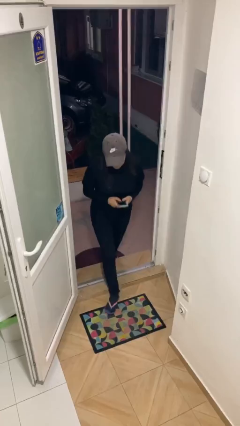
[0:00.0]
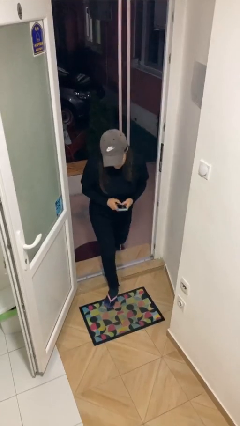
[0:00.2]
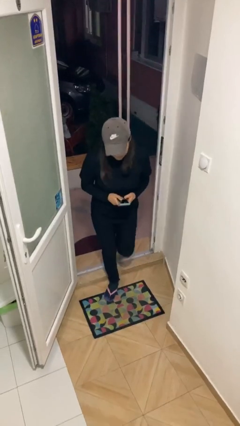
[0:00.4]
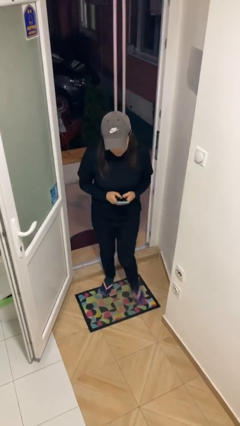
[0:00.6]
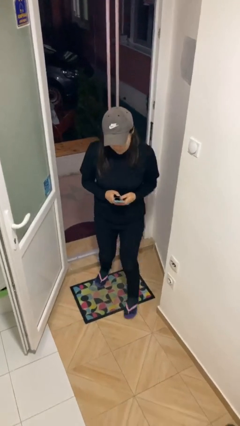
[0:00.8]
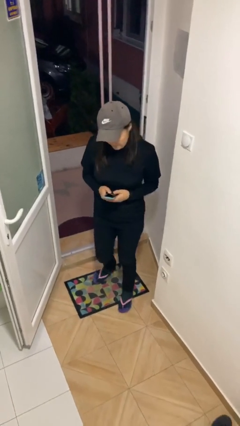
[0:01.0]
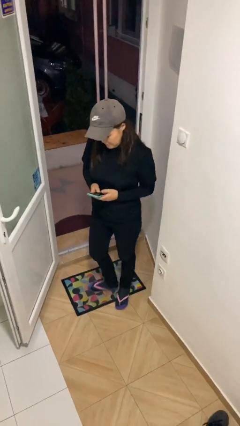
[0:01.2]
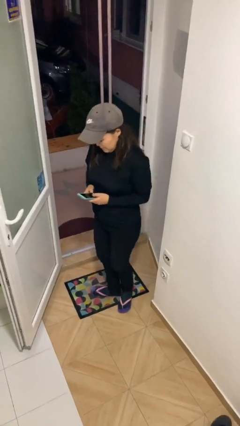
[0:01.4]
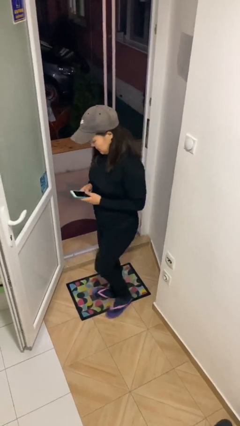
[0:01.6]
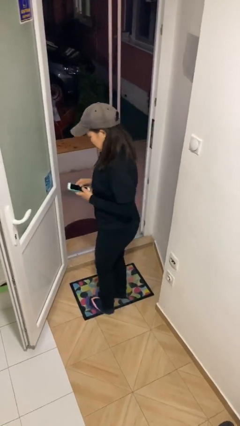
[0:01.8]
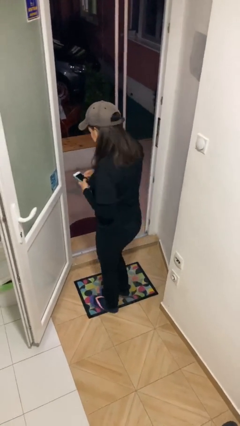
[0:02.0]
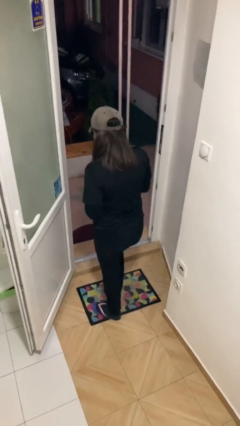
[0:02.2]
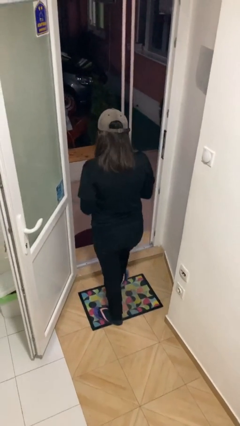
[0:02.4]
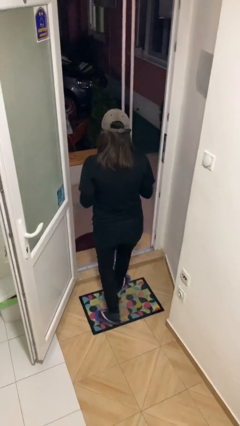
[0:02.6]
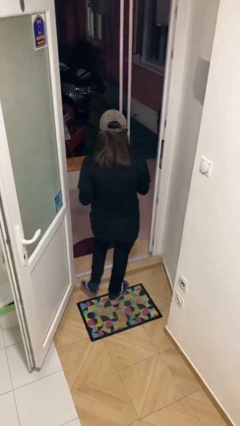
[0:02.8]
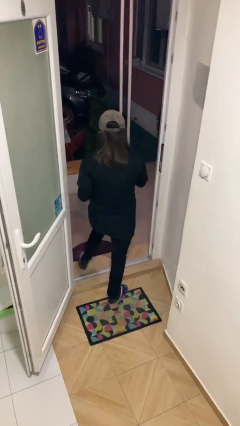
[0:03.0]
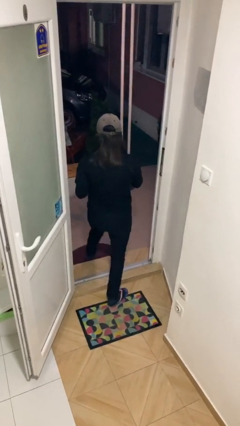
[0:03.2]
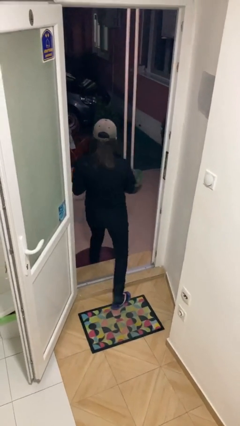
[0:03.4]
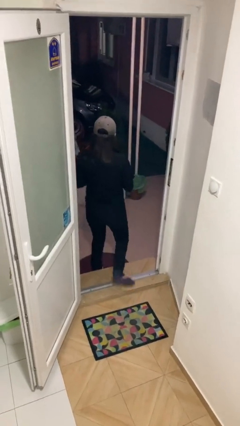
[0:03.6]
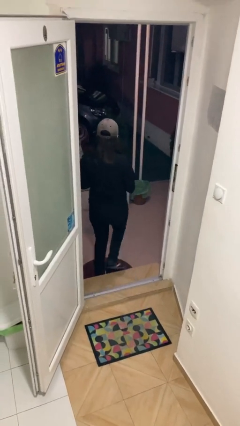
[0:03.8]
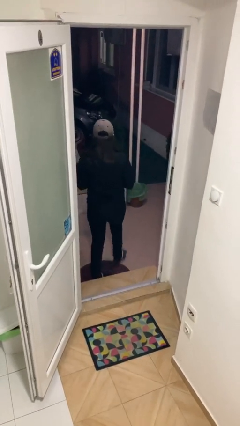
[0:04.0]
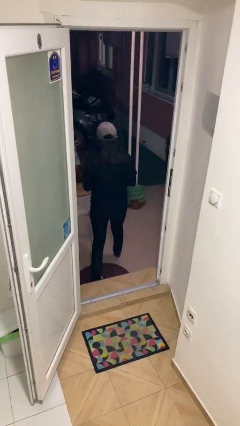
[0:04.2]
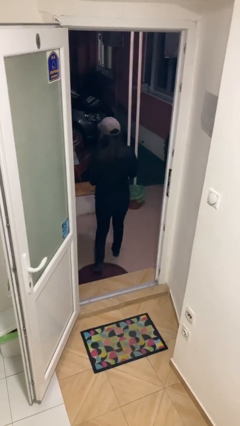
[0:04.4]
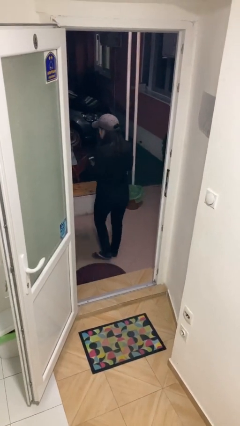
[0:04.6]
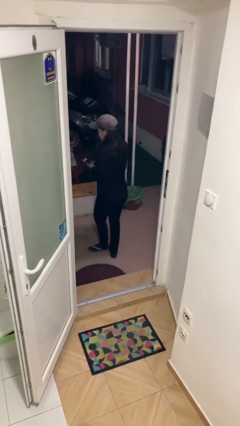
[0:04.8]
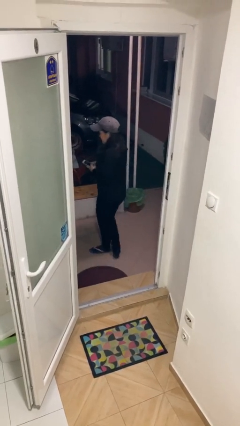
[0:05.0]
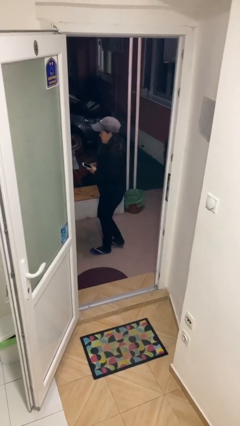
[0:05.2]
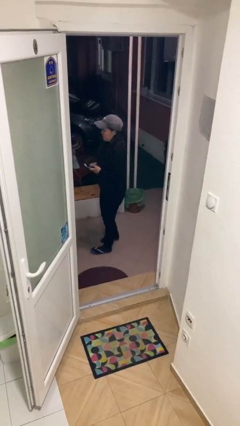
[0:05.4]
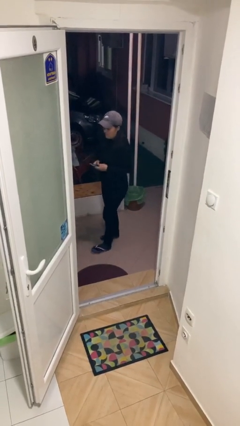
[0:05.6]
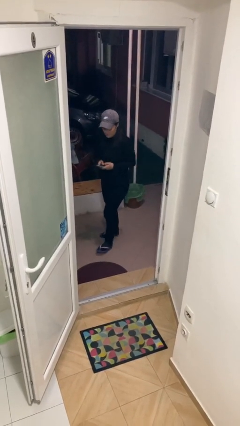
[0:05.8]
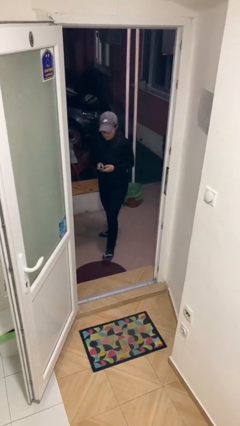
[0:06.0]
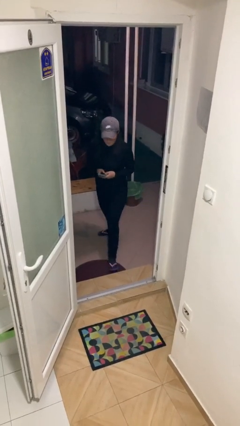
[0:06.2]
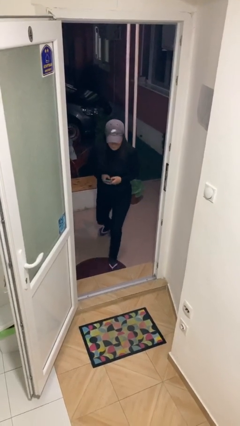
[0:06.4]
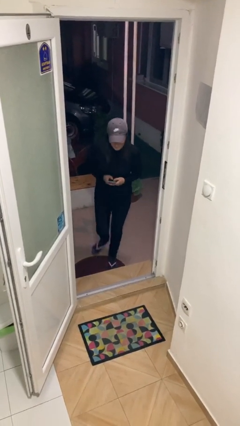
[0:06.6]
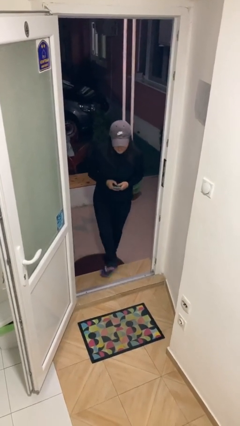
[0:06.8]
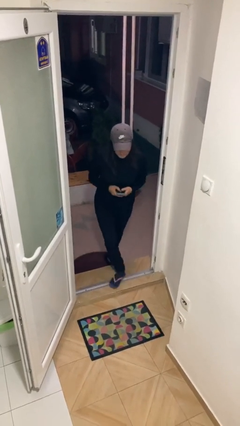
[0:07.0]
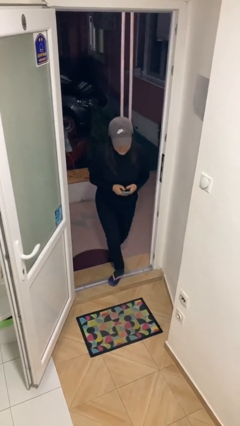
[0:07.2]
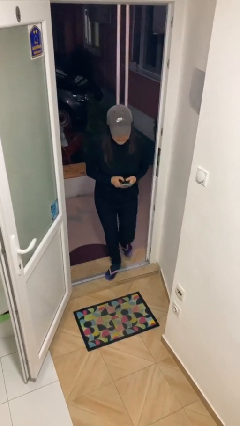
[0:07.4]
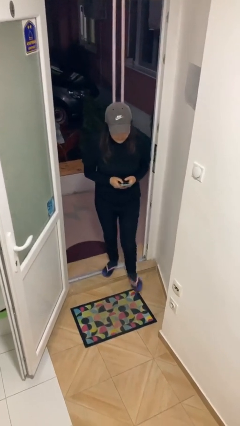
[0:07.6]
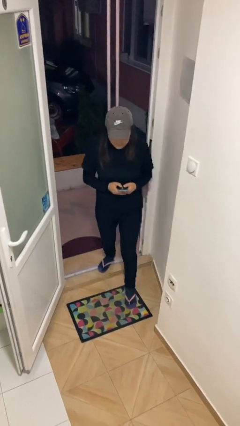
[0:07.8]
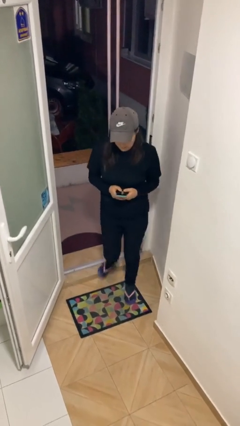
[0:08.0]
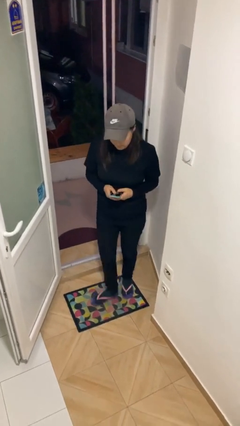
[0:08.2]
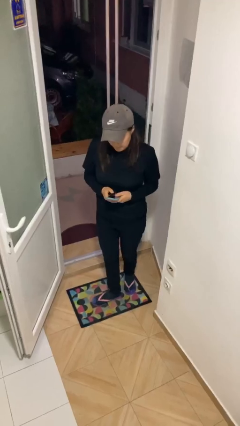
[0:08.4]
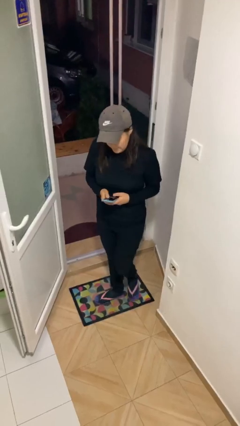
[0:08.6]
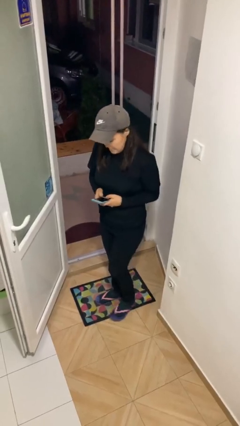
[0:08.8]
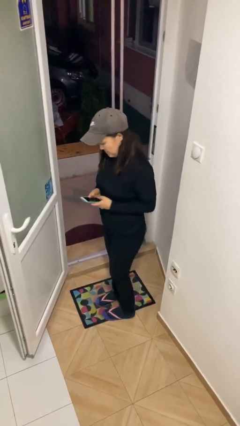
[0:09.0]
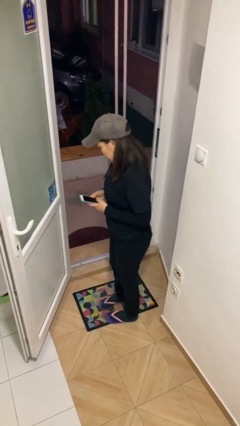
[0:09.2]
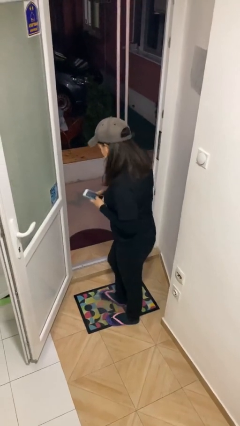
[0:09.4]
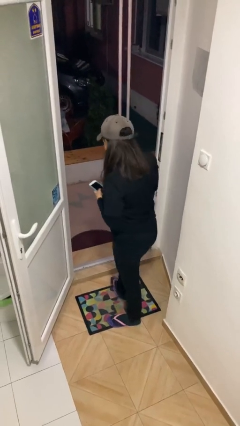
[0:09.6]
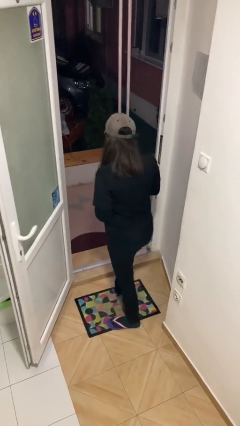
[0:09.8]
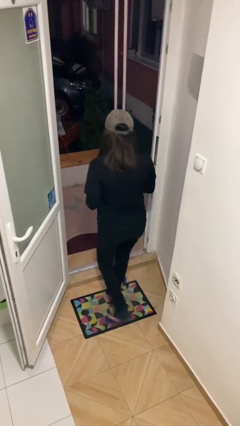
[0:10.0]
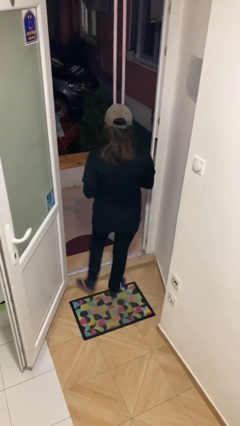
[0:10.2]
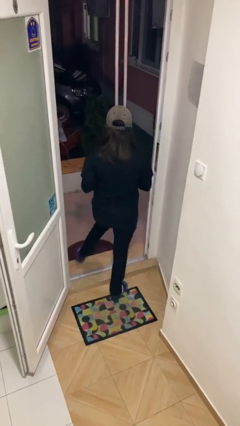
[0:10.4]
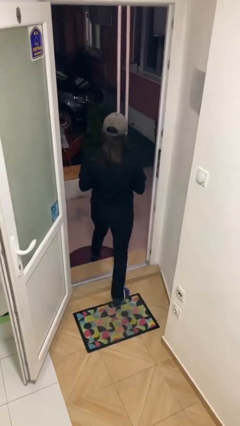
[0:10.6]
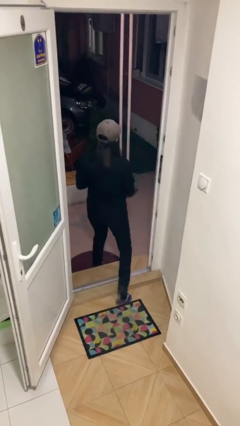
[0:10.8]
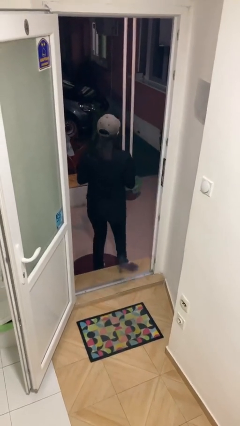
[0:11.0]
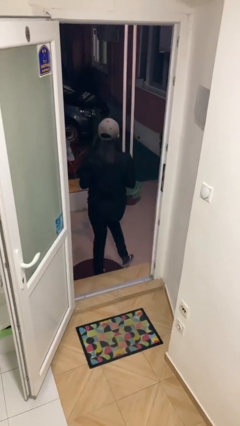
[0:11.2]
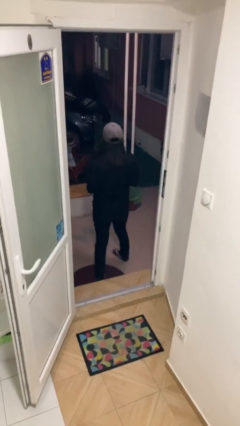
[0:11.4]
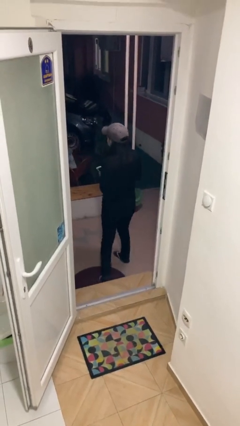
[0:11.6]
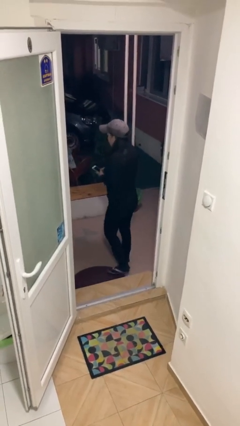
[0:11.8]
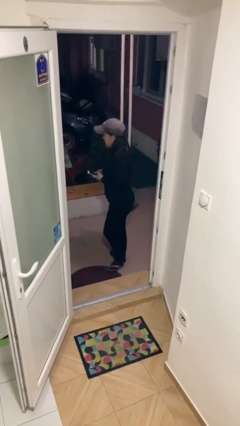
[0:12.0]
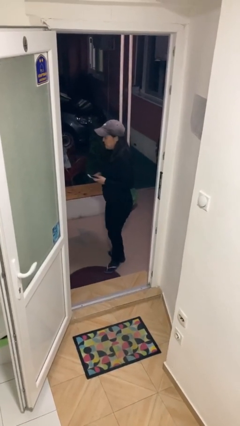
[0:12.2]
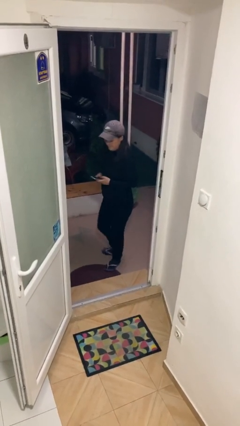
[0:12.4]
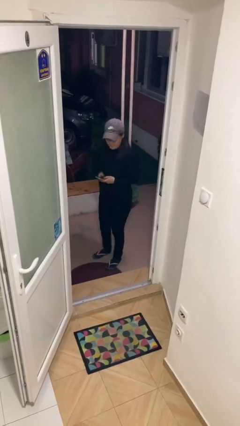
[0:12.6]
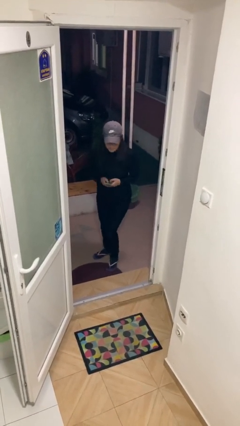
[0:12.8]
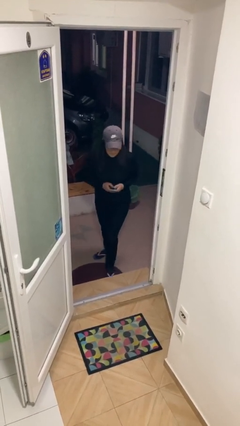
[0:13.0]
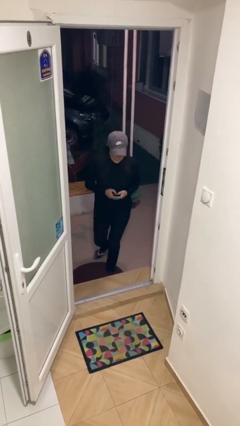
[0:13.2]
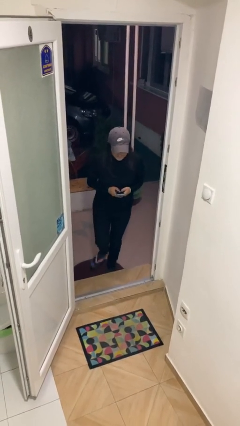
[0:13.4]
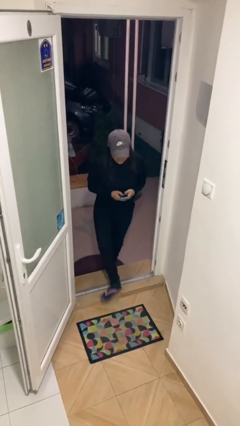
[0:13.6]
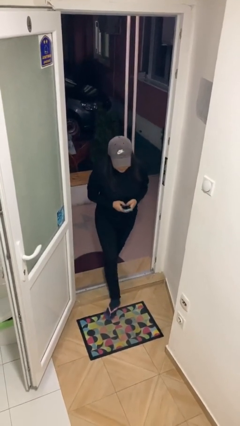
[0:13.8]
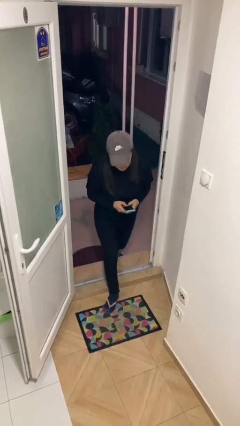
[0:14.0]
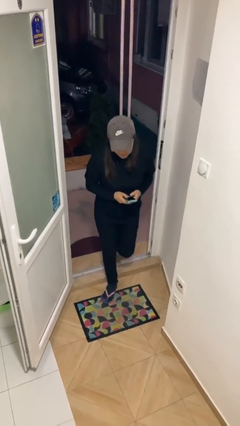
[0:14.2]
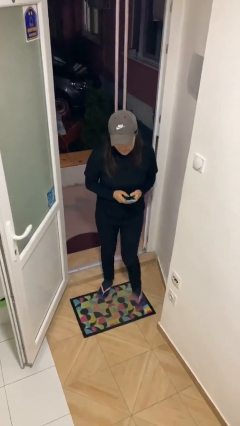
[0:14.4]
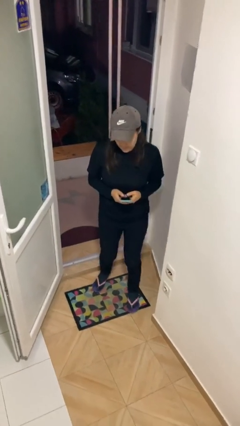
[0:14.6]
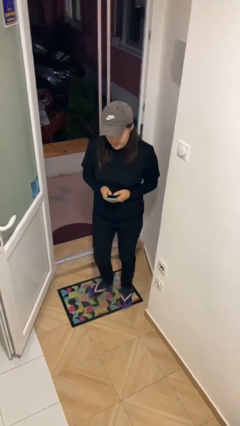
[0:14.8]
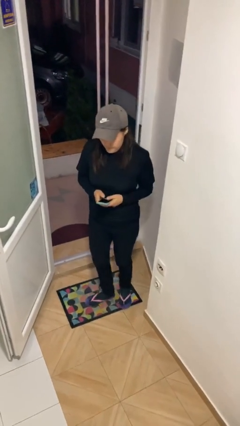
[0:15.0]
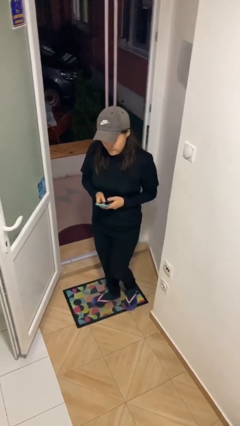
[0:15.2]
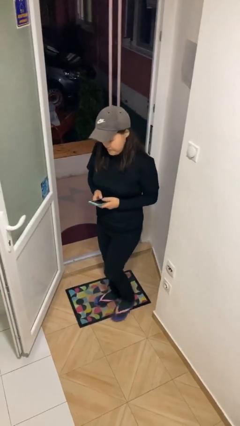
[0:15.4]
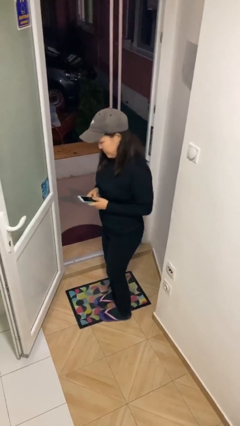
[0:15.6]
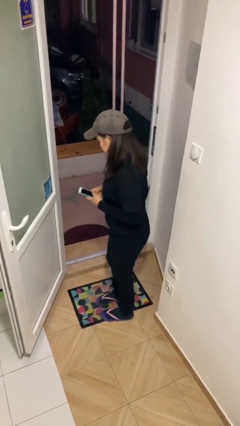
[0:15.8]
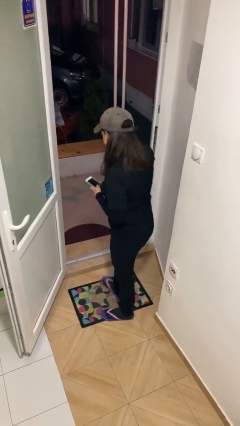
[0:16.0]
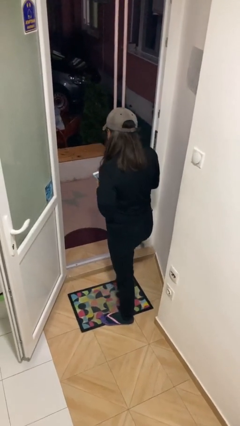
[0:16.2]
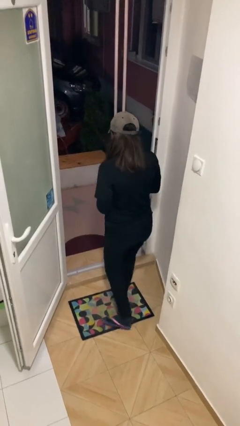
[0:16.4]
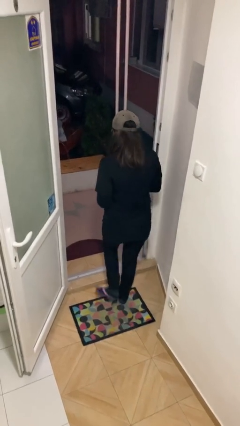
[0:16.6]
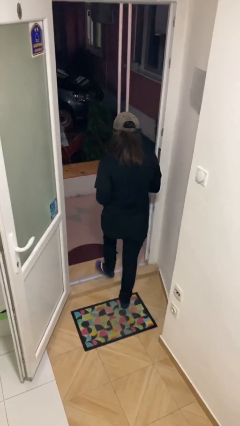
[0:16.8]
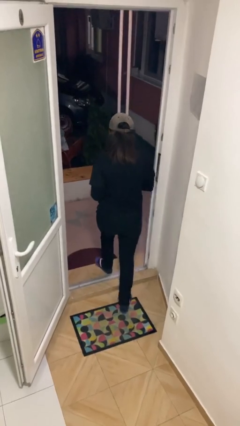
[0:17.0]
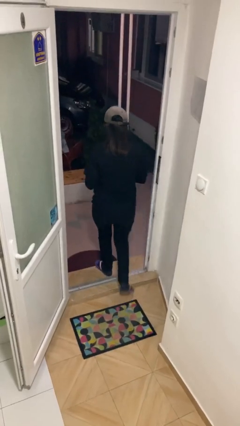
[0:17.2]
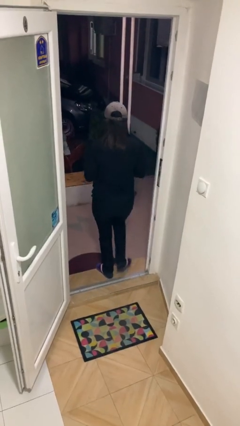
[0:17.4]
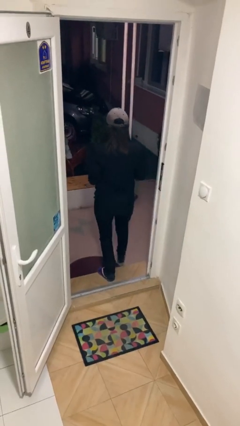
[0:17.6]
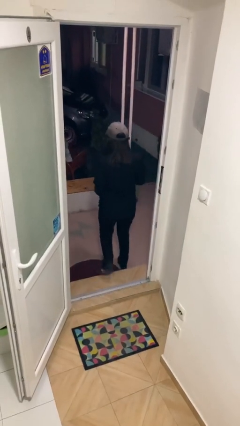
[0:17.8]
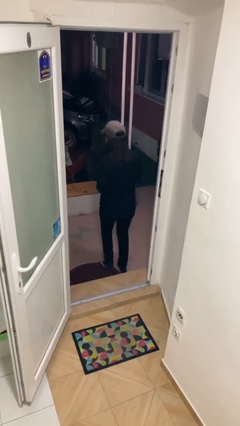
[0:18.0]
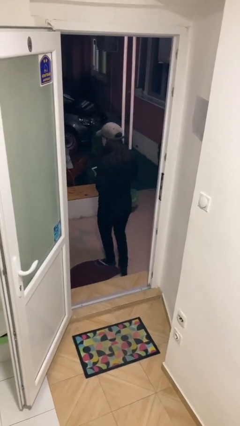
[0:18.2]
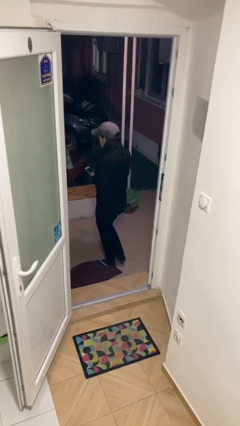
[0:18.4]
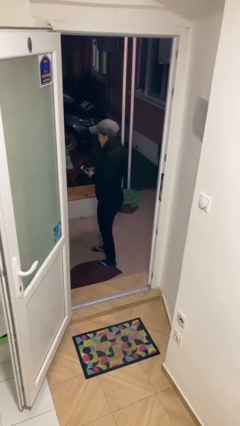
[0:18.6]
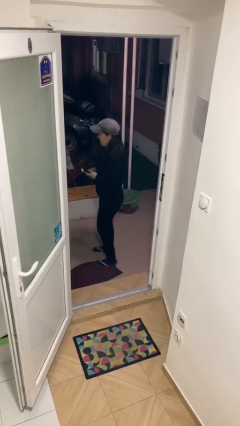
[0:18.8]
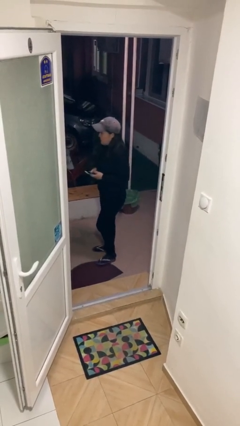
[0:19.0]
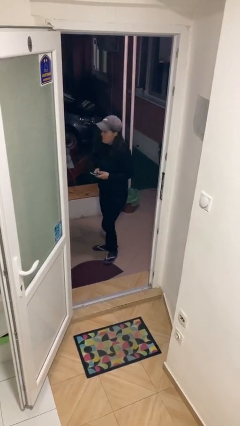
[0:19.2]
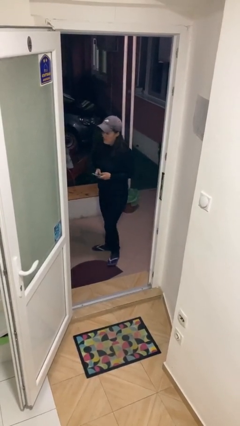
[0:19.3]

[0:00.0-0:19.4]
person texts on phone
